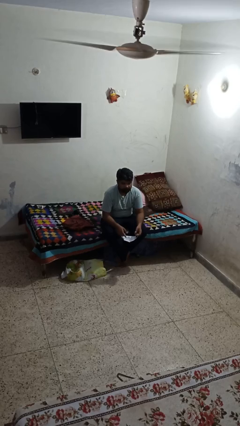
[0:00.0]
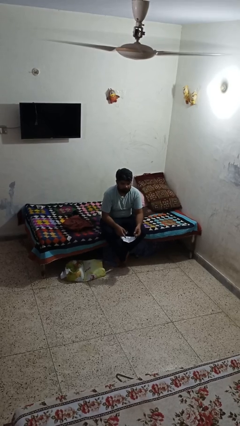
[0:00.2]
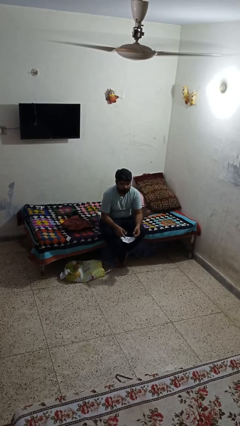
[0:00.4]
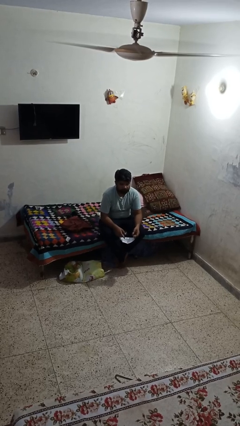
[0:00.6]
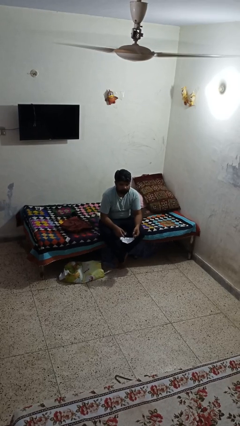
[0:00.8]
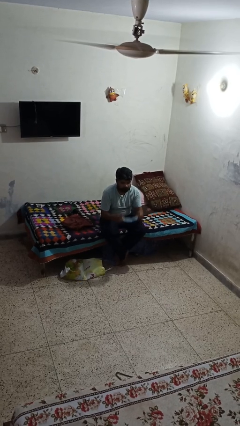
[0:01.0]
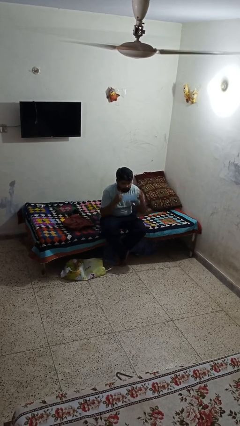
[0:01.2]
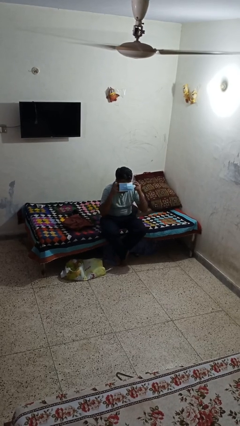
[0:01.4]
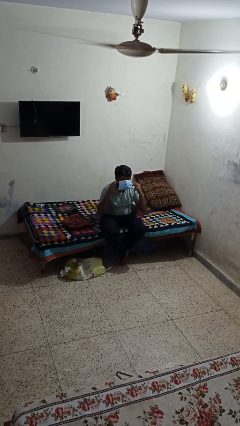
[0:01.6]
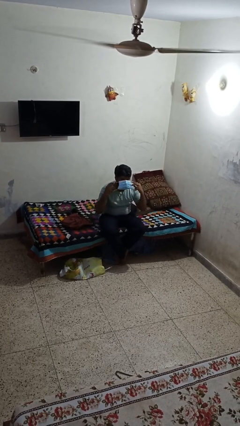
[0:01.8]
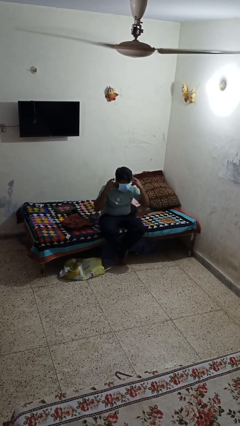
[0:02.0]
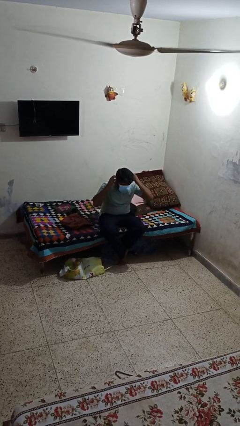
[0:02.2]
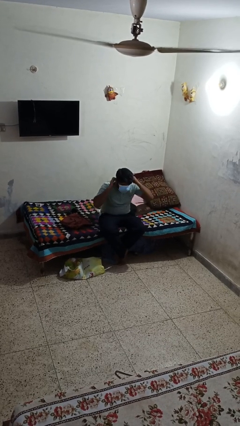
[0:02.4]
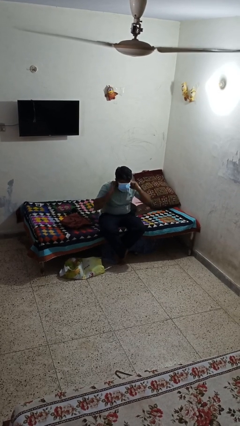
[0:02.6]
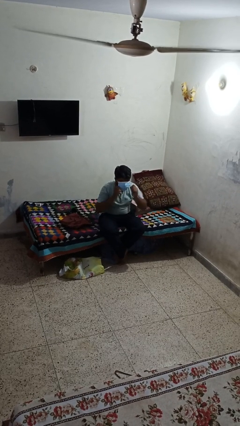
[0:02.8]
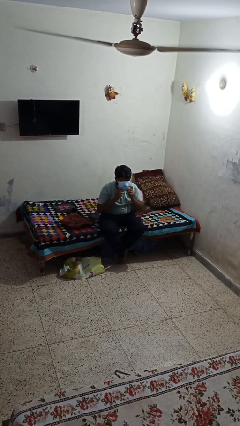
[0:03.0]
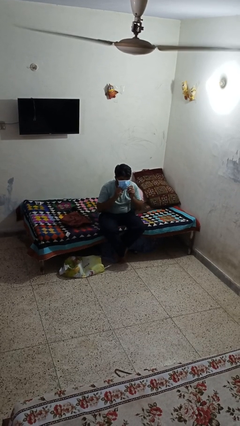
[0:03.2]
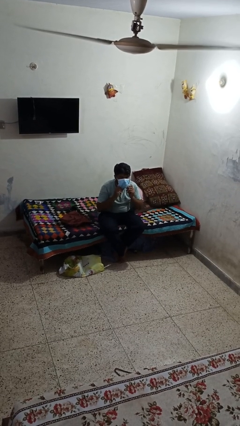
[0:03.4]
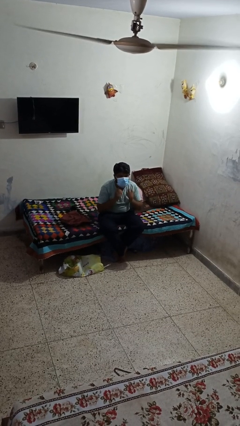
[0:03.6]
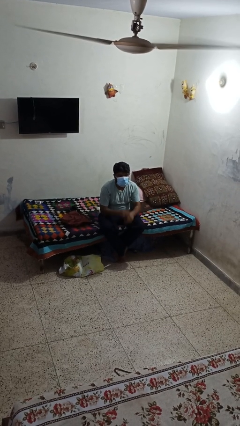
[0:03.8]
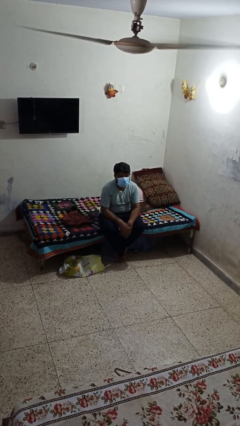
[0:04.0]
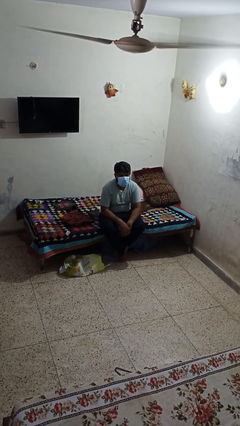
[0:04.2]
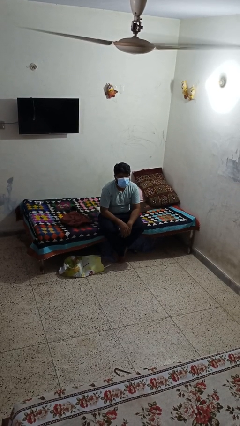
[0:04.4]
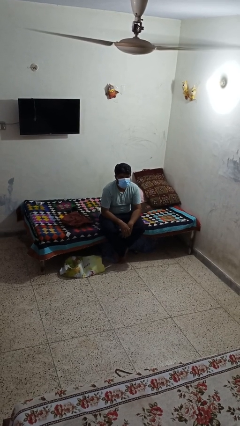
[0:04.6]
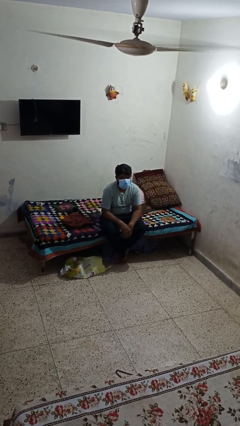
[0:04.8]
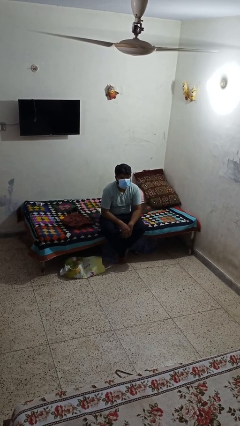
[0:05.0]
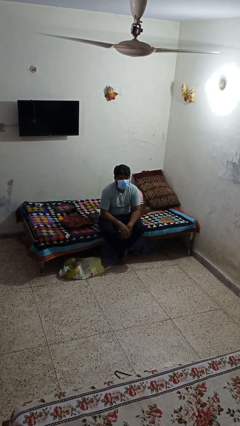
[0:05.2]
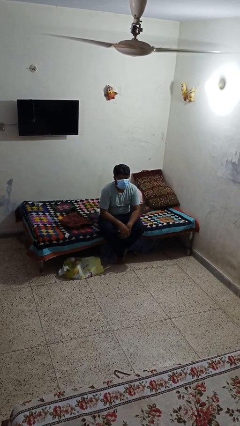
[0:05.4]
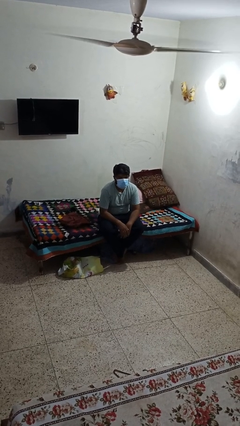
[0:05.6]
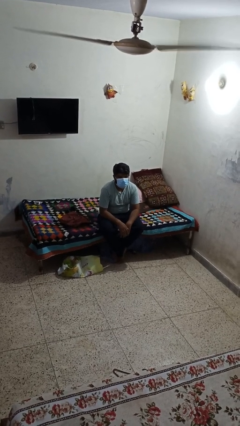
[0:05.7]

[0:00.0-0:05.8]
person puts on facemask

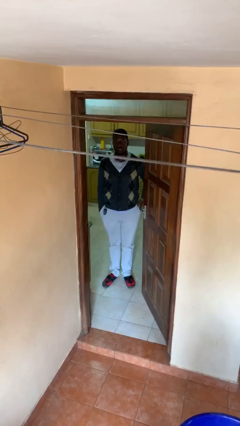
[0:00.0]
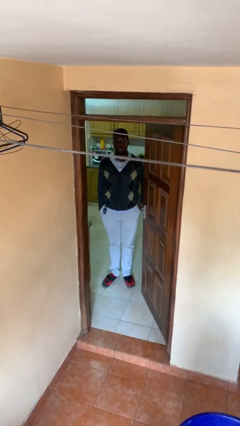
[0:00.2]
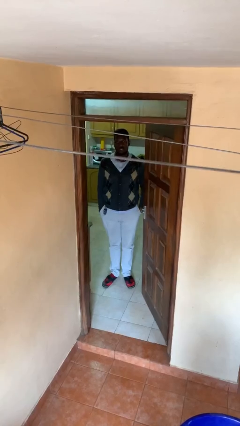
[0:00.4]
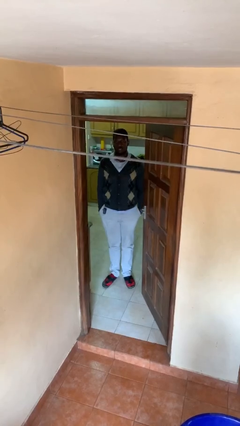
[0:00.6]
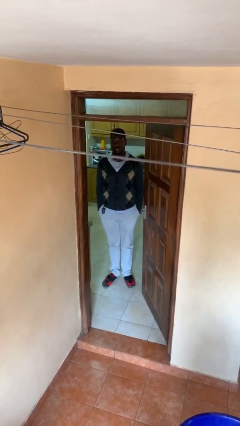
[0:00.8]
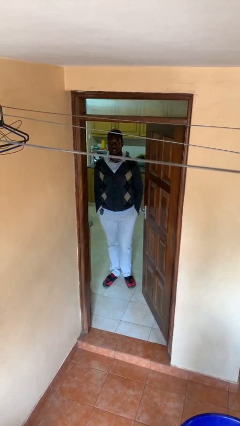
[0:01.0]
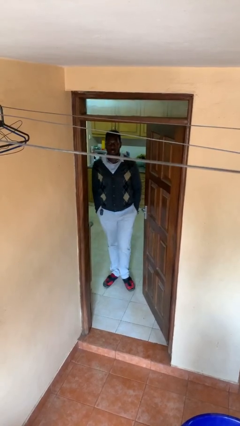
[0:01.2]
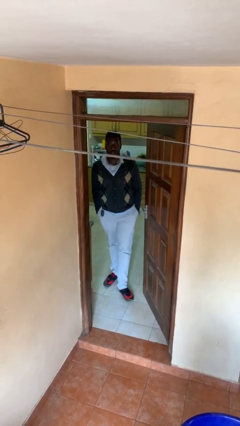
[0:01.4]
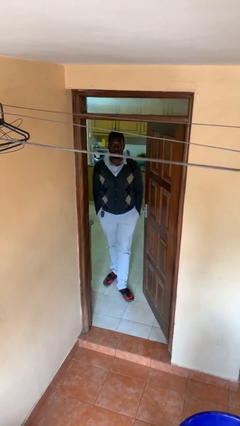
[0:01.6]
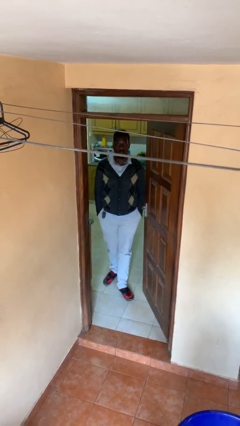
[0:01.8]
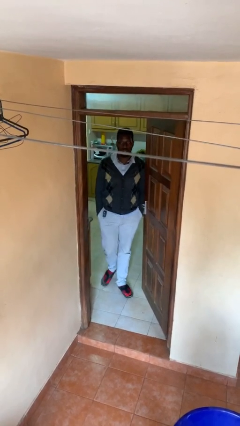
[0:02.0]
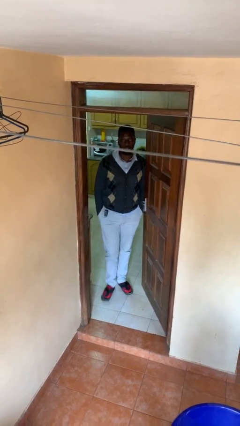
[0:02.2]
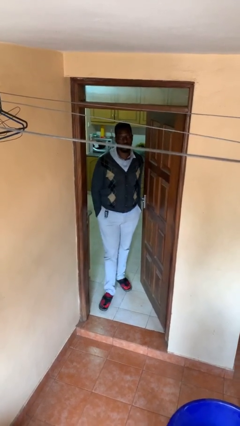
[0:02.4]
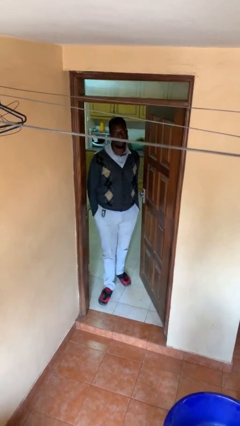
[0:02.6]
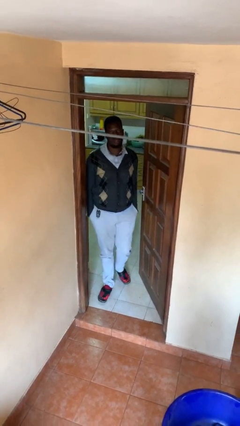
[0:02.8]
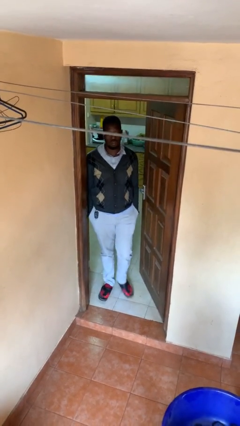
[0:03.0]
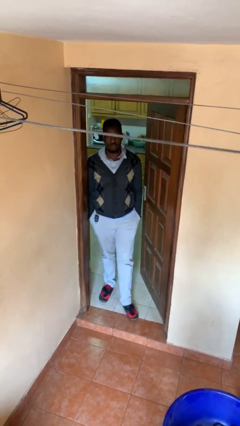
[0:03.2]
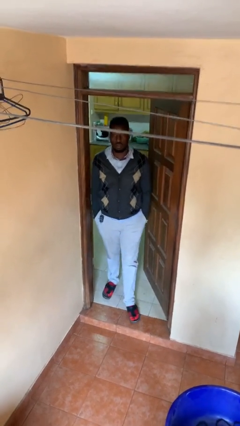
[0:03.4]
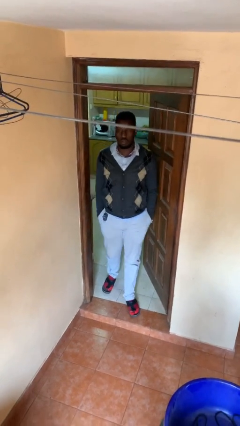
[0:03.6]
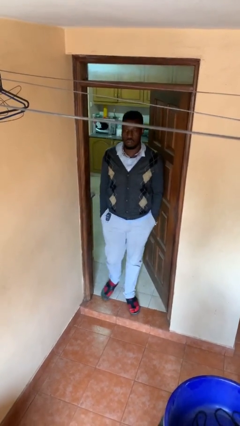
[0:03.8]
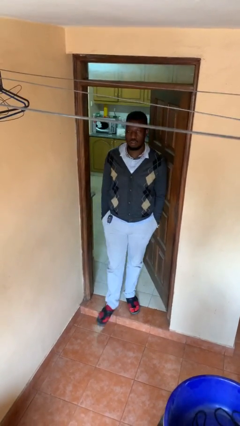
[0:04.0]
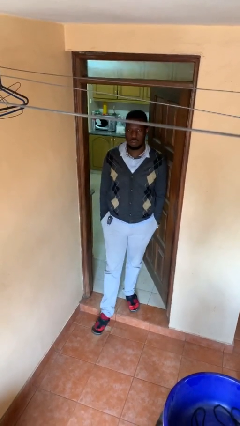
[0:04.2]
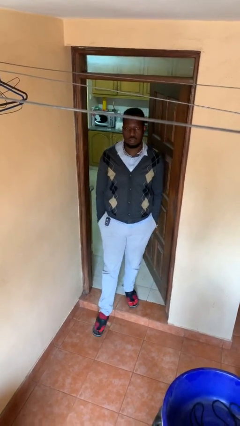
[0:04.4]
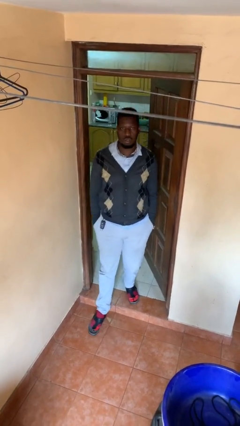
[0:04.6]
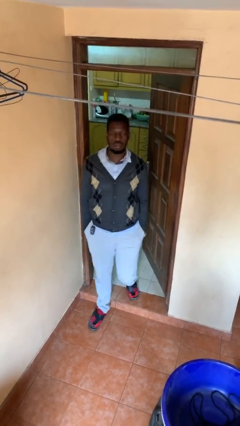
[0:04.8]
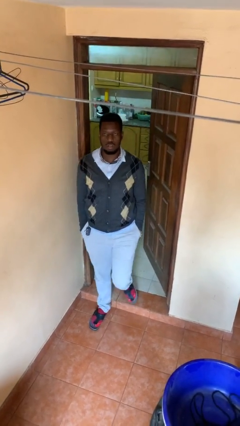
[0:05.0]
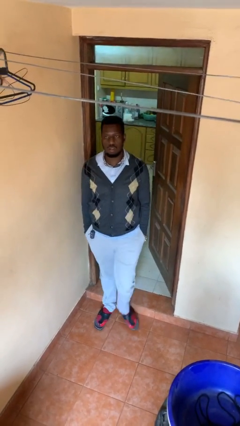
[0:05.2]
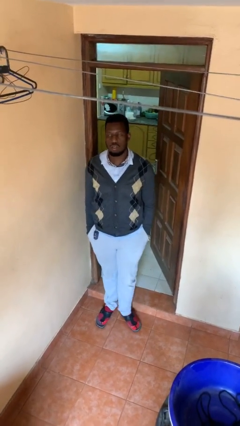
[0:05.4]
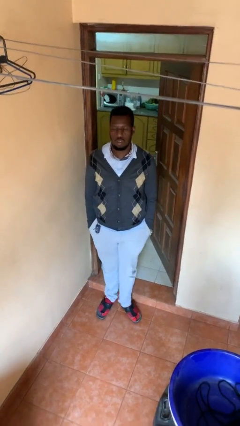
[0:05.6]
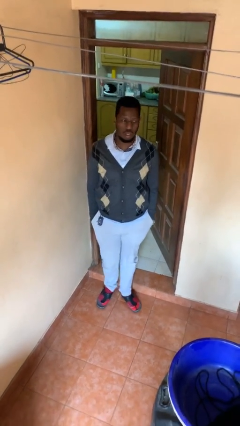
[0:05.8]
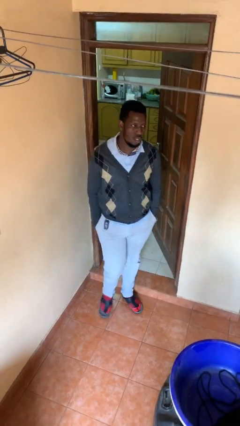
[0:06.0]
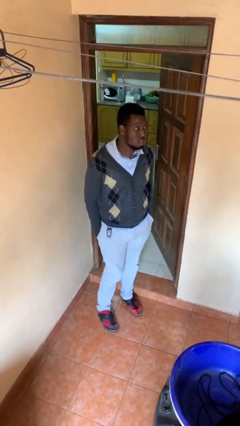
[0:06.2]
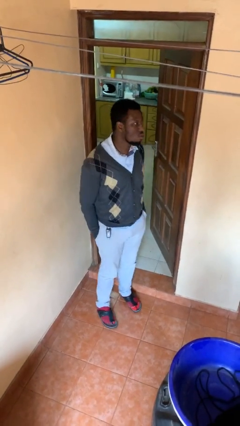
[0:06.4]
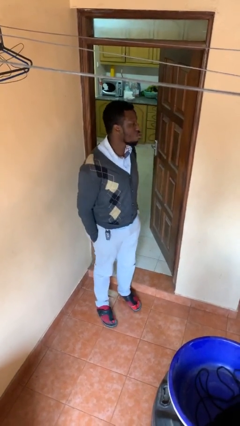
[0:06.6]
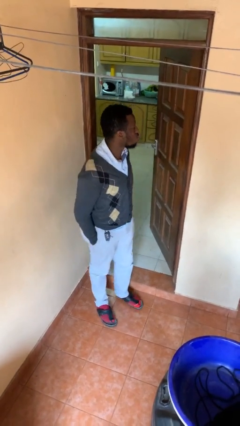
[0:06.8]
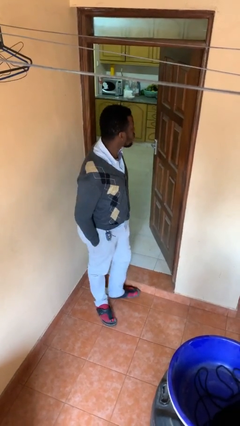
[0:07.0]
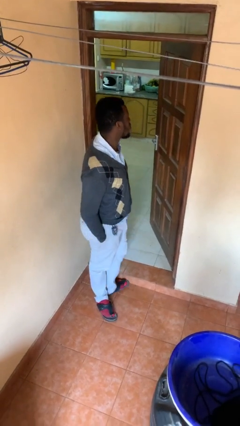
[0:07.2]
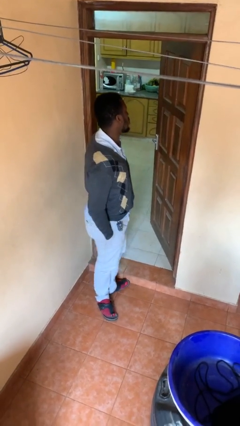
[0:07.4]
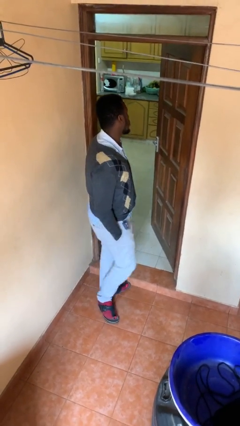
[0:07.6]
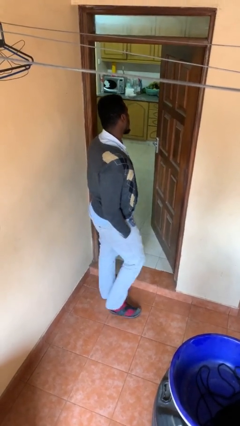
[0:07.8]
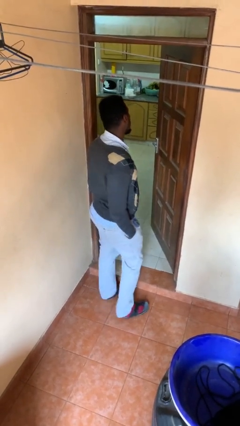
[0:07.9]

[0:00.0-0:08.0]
person enters scene through structure

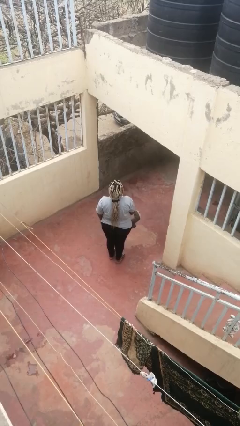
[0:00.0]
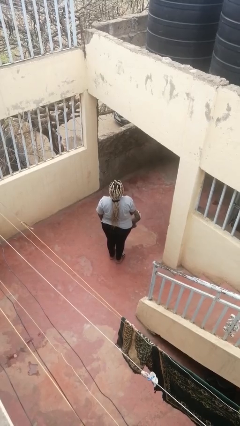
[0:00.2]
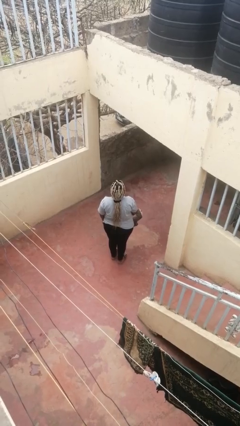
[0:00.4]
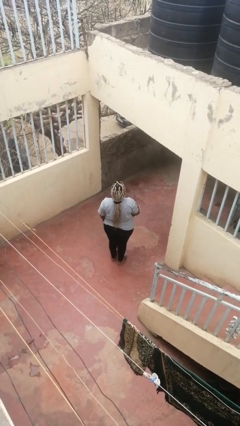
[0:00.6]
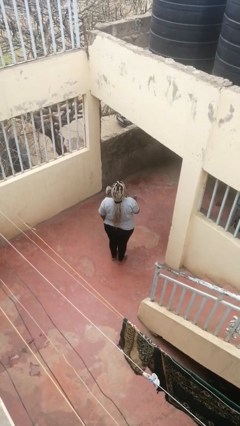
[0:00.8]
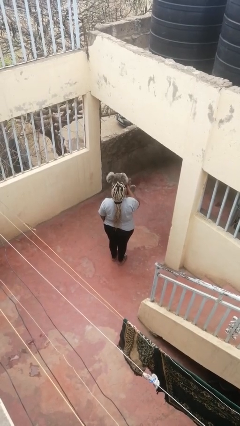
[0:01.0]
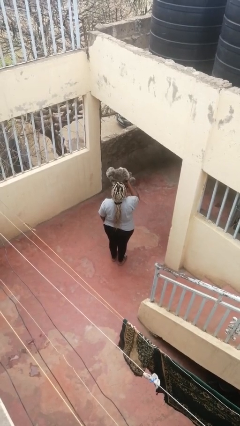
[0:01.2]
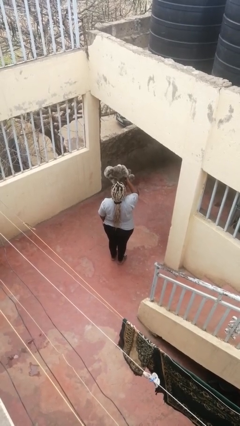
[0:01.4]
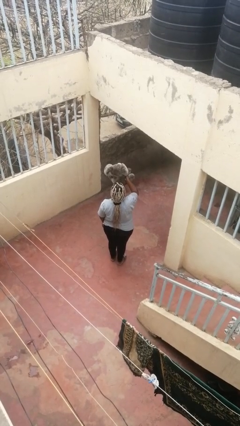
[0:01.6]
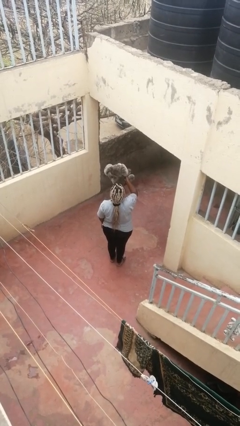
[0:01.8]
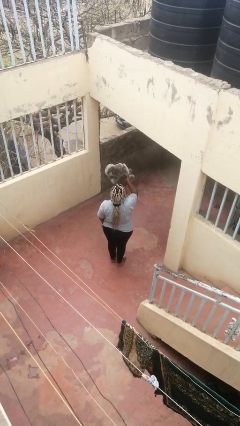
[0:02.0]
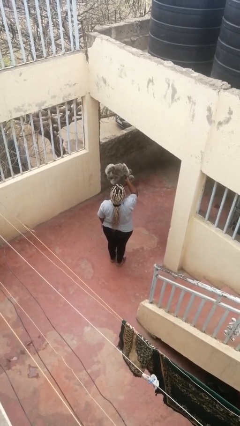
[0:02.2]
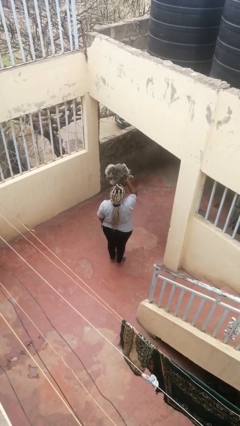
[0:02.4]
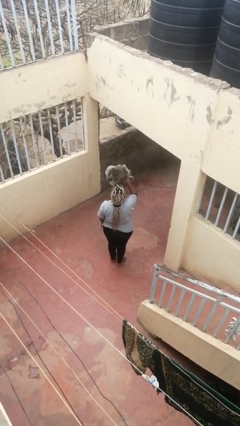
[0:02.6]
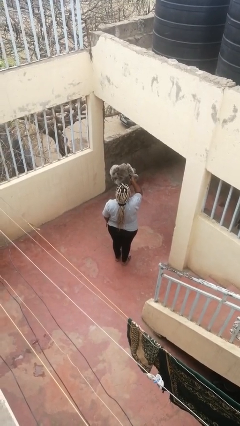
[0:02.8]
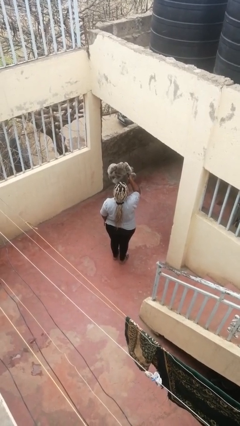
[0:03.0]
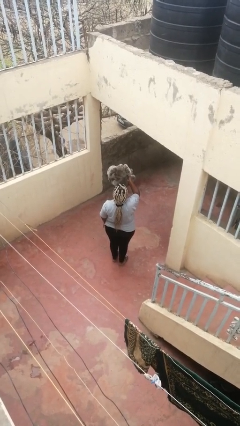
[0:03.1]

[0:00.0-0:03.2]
person holds object above head

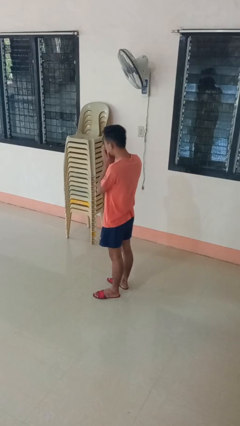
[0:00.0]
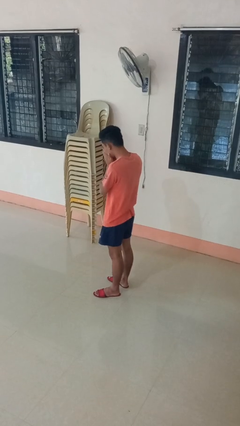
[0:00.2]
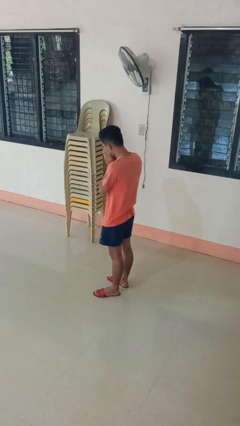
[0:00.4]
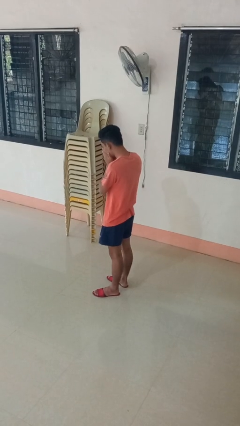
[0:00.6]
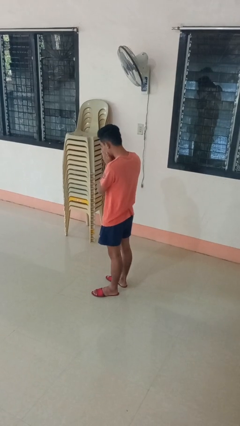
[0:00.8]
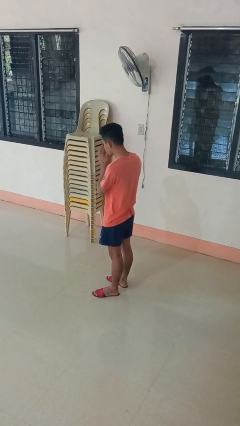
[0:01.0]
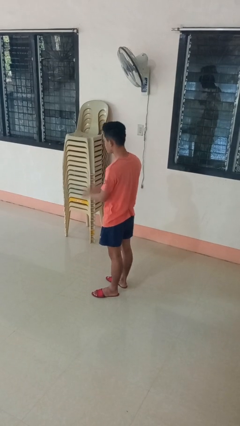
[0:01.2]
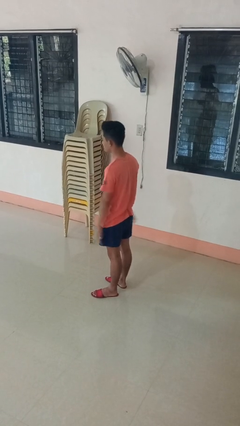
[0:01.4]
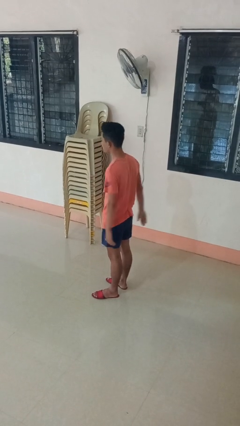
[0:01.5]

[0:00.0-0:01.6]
person sneezes into hand
